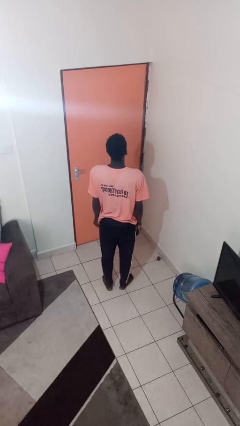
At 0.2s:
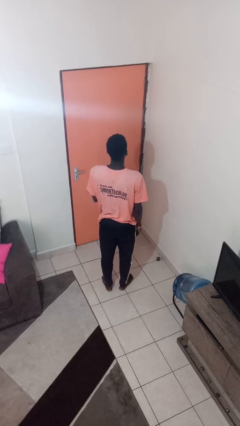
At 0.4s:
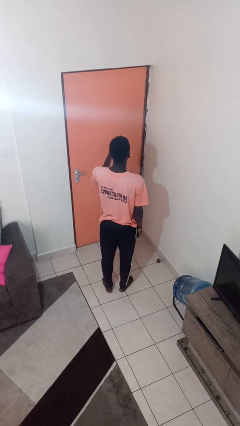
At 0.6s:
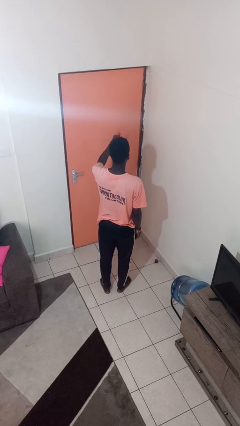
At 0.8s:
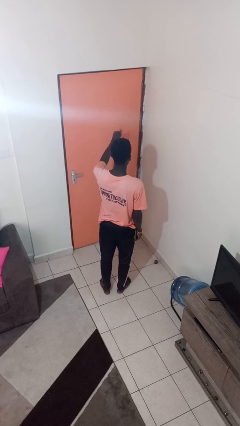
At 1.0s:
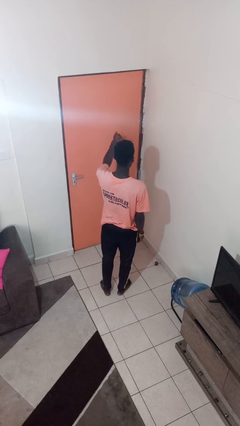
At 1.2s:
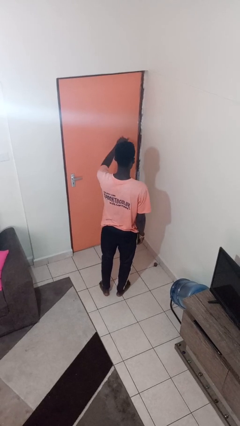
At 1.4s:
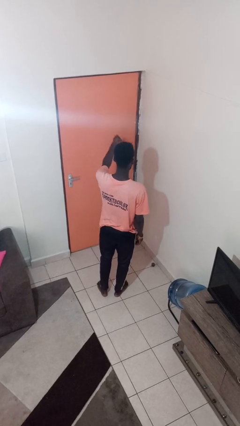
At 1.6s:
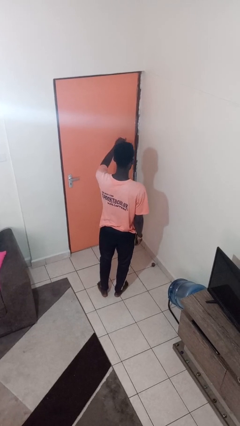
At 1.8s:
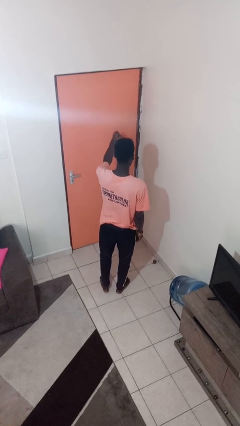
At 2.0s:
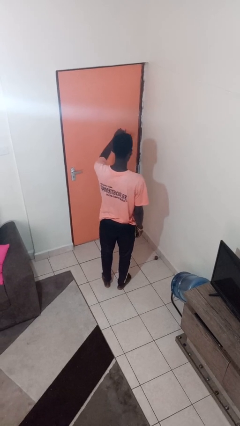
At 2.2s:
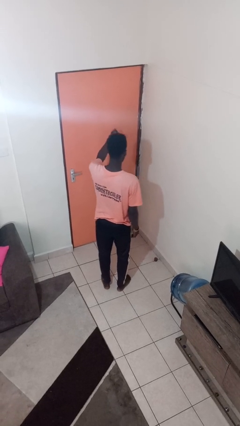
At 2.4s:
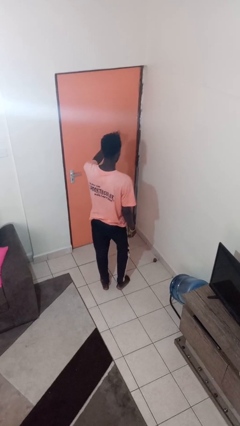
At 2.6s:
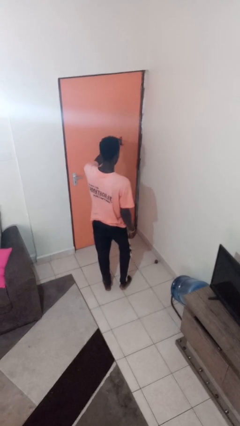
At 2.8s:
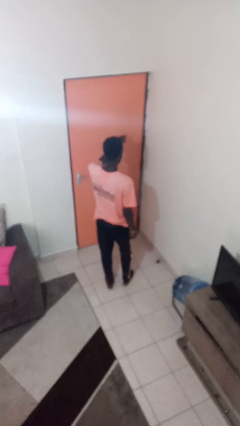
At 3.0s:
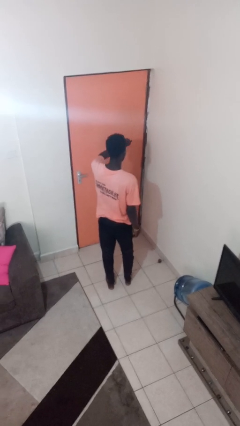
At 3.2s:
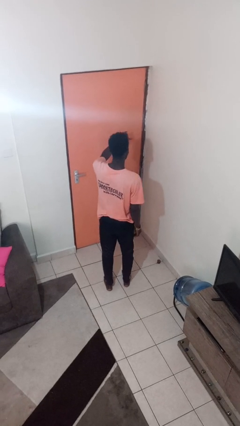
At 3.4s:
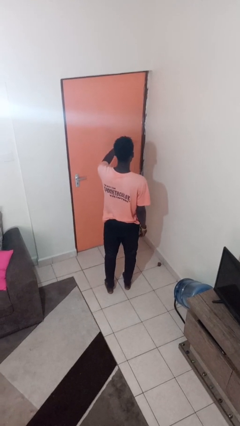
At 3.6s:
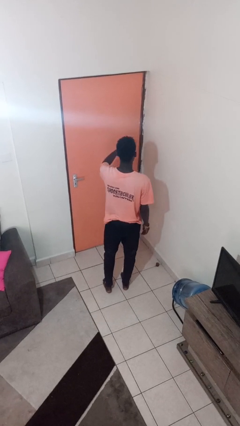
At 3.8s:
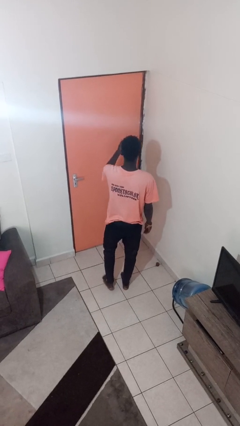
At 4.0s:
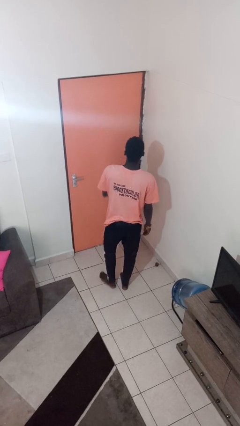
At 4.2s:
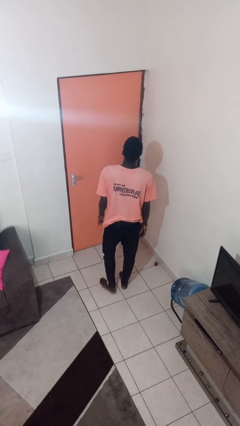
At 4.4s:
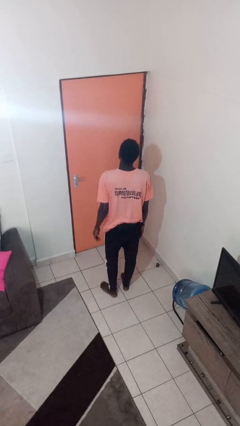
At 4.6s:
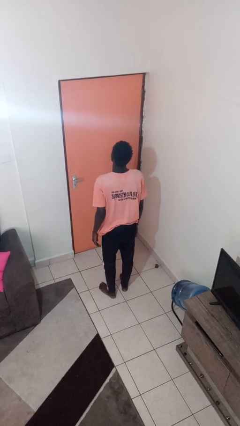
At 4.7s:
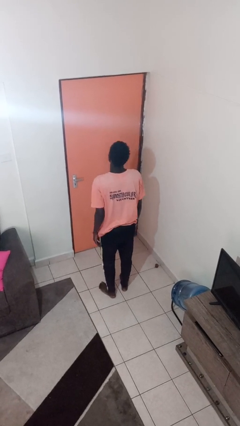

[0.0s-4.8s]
person gestures hang loose

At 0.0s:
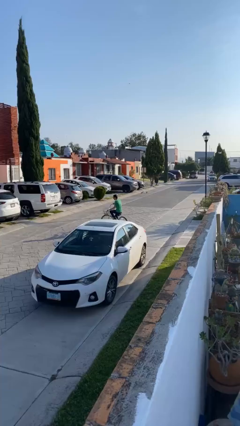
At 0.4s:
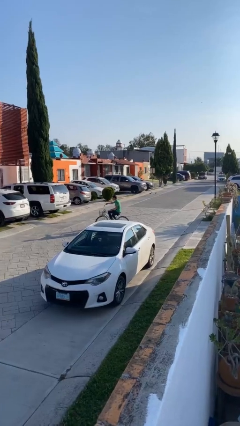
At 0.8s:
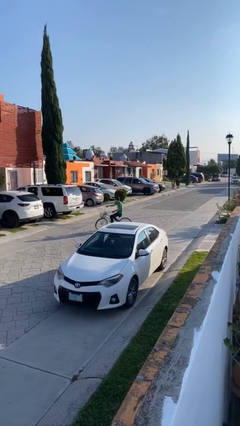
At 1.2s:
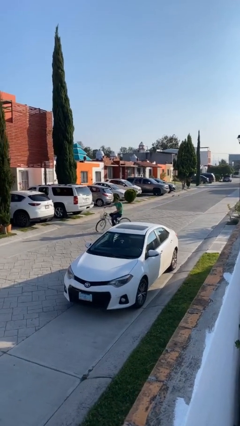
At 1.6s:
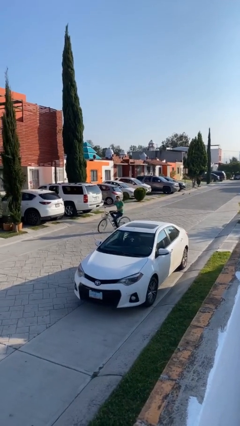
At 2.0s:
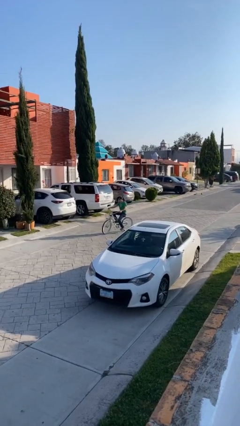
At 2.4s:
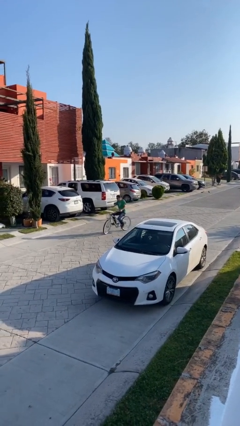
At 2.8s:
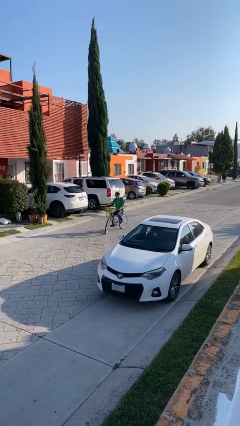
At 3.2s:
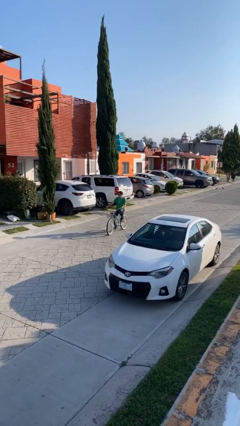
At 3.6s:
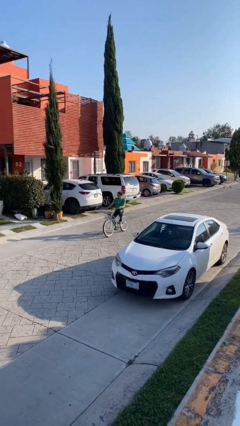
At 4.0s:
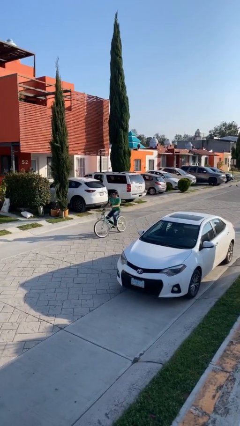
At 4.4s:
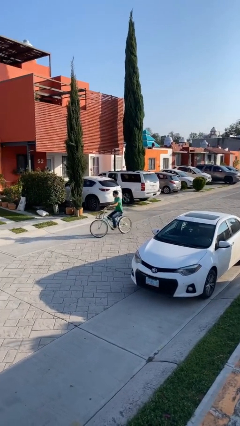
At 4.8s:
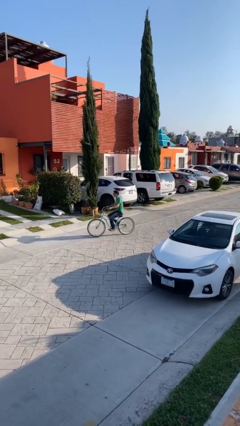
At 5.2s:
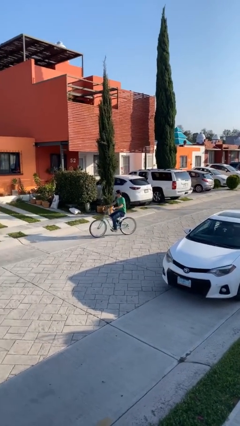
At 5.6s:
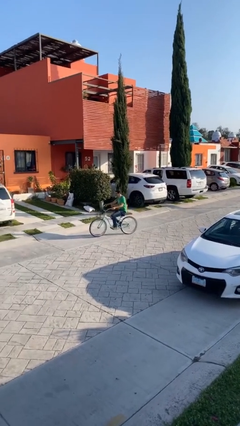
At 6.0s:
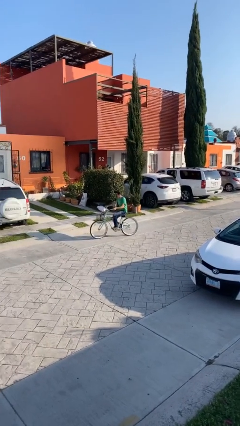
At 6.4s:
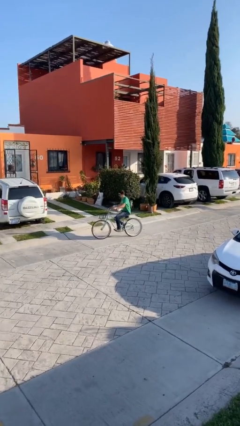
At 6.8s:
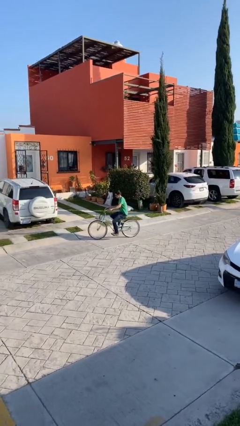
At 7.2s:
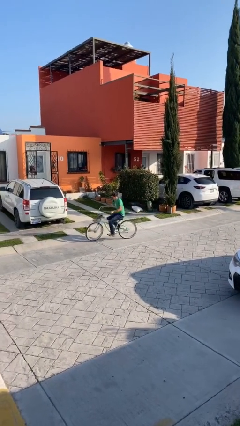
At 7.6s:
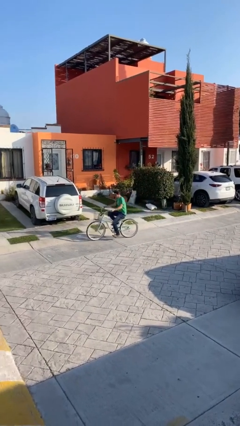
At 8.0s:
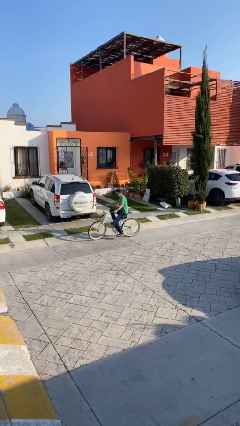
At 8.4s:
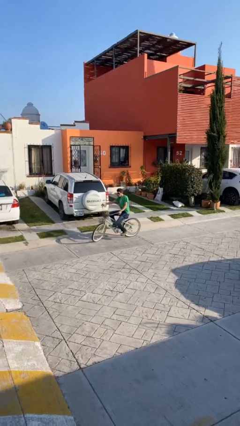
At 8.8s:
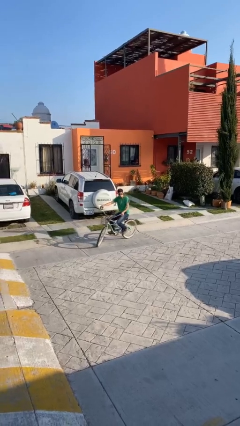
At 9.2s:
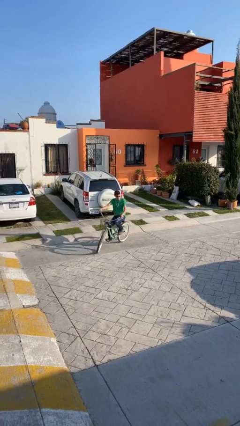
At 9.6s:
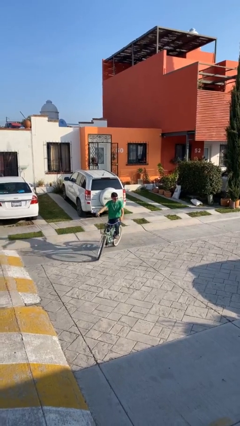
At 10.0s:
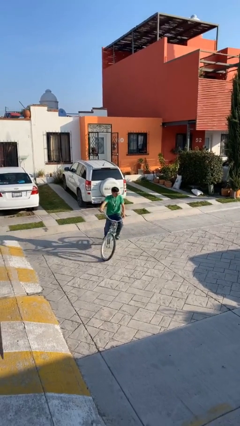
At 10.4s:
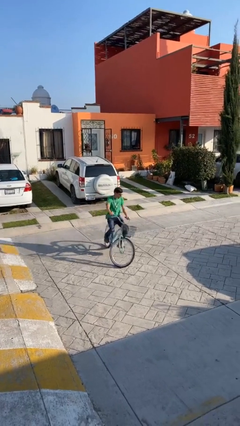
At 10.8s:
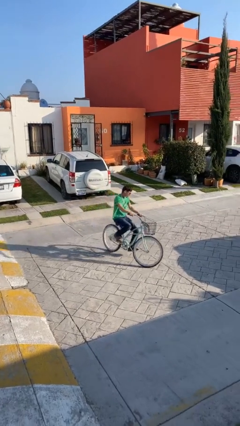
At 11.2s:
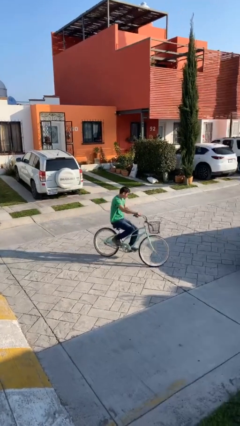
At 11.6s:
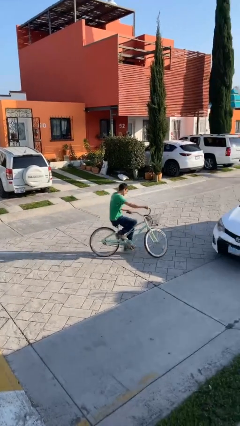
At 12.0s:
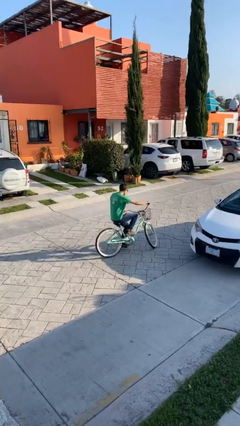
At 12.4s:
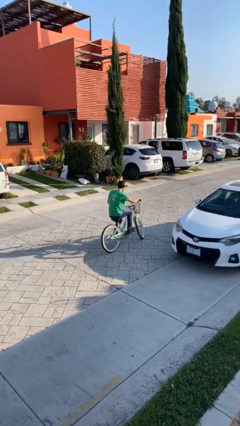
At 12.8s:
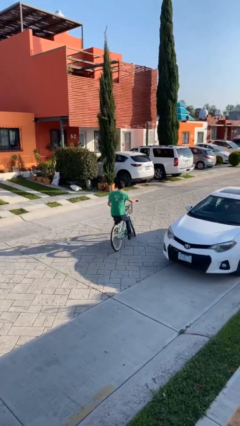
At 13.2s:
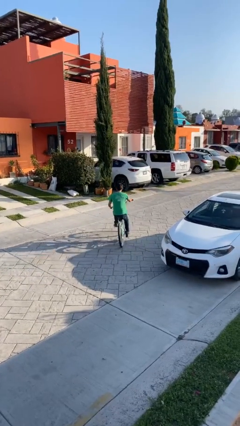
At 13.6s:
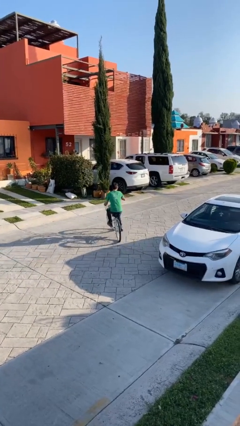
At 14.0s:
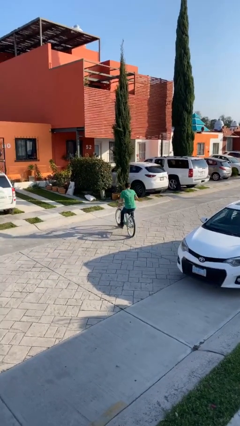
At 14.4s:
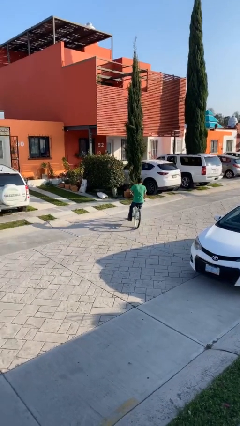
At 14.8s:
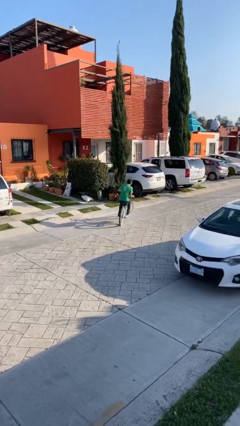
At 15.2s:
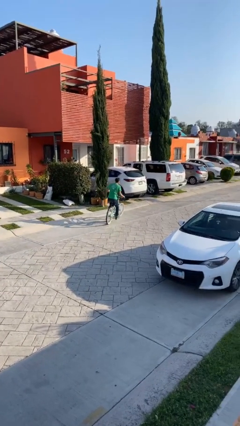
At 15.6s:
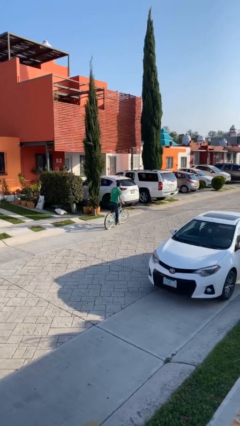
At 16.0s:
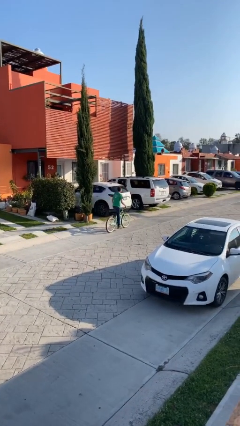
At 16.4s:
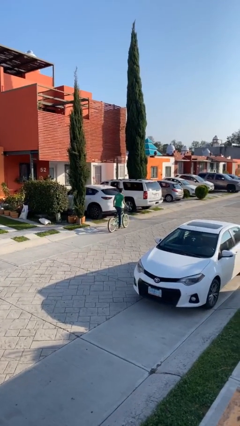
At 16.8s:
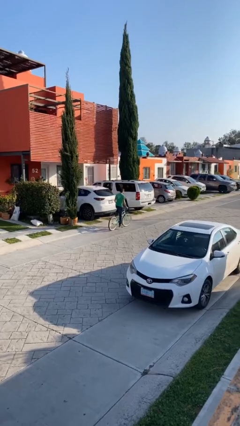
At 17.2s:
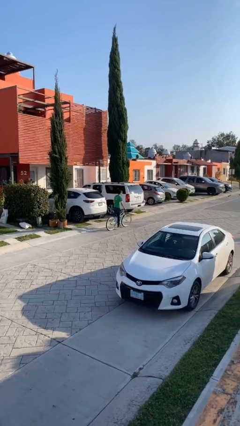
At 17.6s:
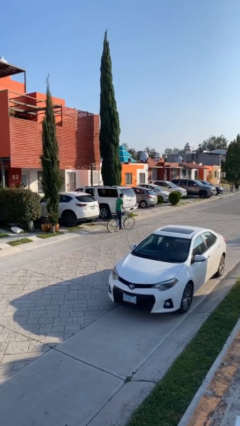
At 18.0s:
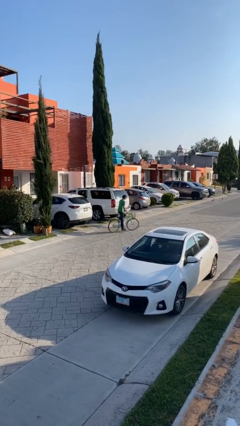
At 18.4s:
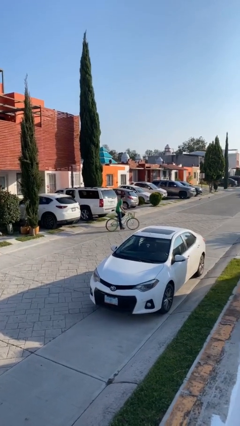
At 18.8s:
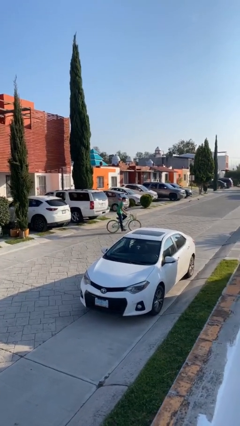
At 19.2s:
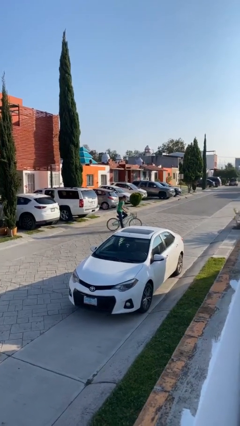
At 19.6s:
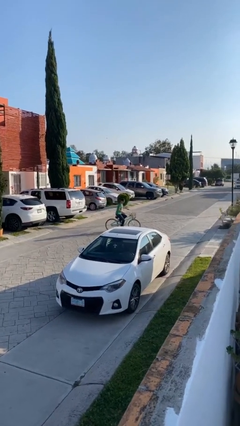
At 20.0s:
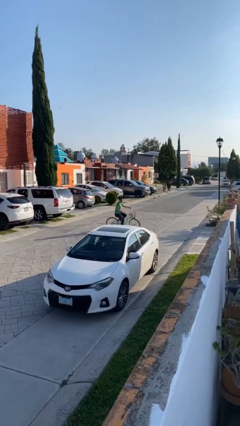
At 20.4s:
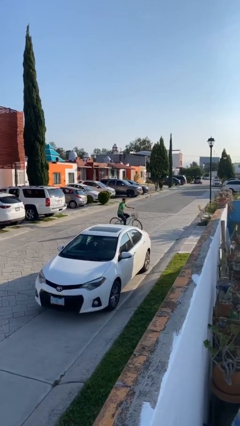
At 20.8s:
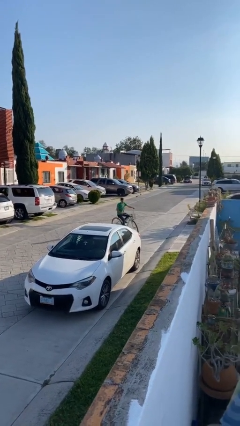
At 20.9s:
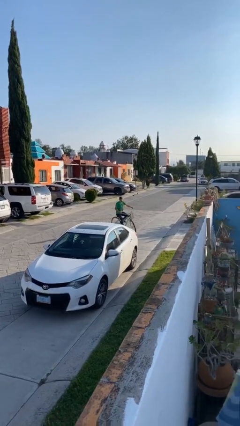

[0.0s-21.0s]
person rides bicycle

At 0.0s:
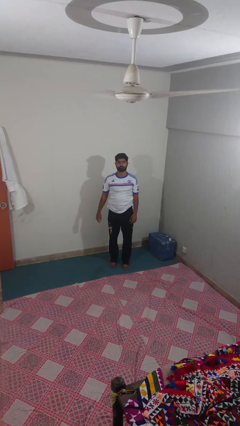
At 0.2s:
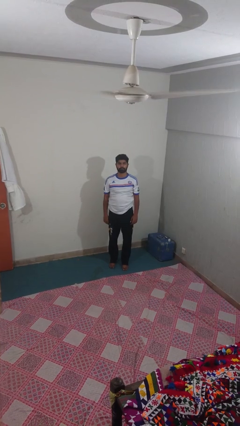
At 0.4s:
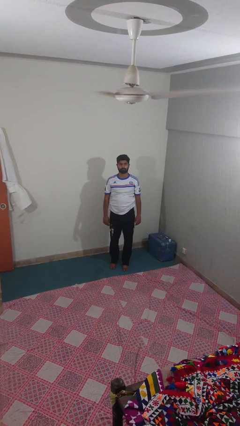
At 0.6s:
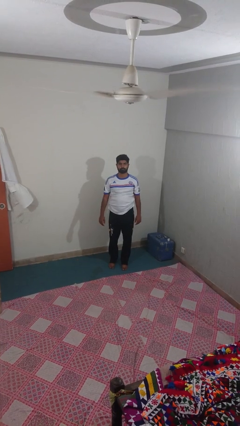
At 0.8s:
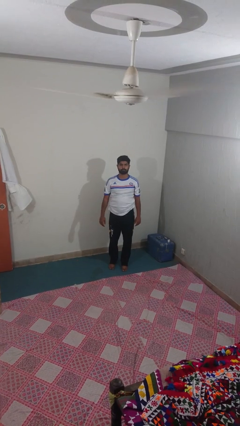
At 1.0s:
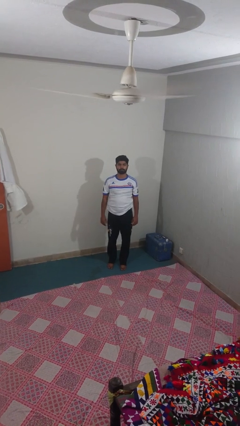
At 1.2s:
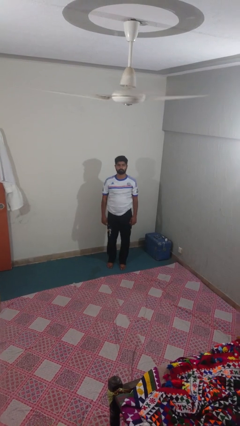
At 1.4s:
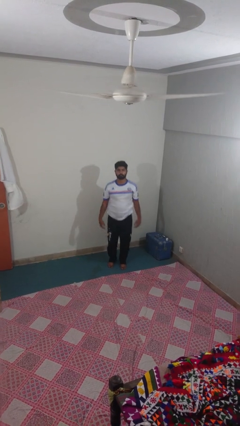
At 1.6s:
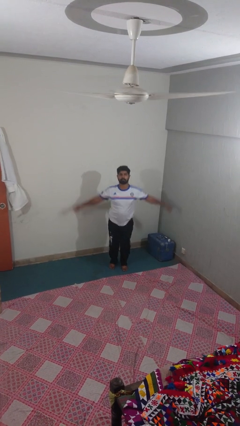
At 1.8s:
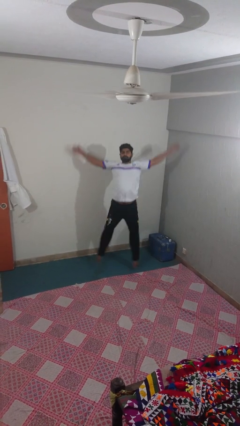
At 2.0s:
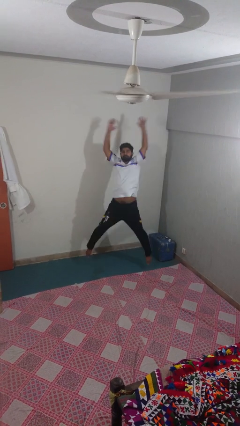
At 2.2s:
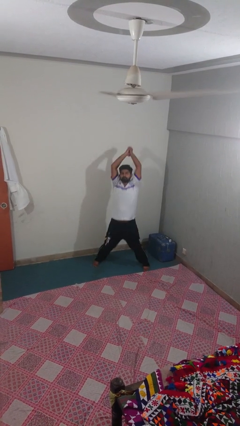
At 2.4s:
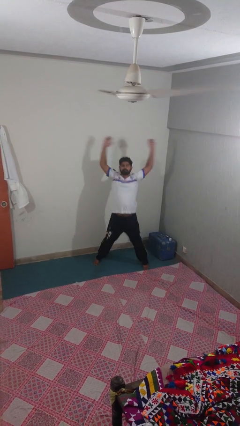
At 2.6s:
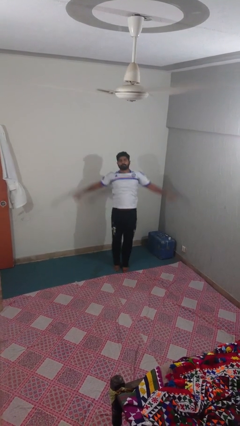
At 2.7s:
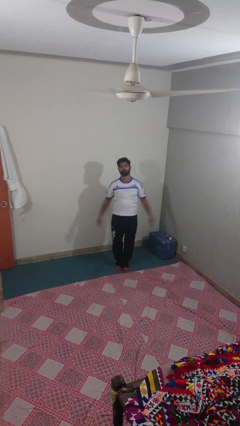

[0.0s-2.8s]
person exercises with jumping jacks
